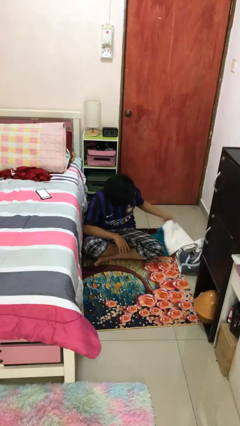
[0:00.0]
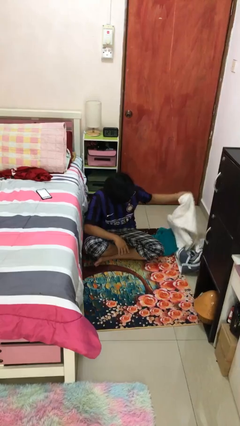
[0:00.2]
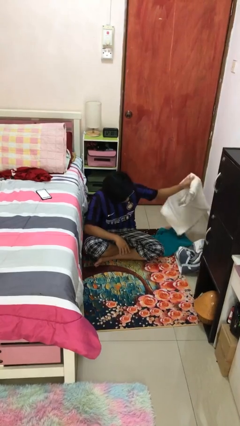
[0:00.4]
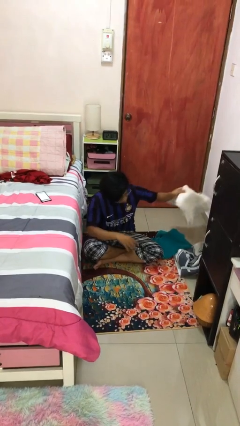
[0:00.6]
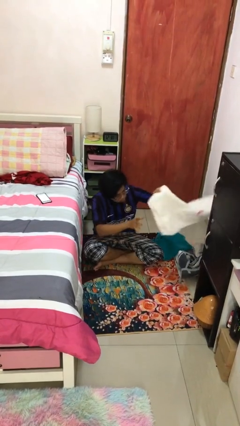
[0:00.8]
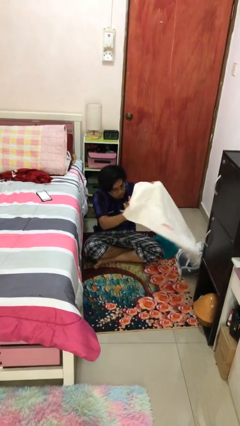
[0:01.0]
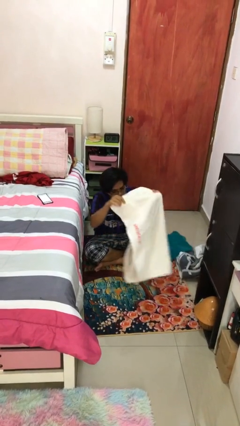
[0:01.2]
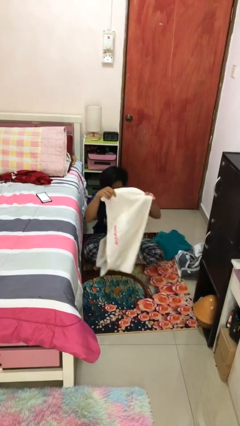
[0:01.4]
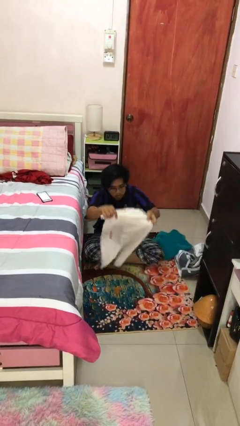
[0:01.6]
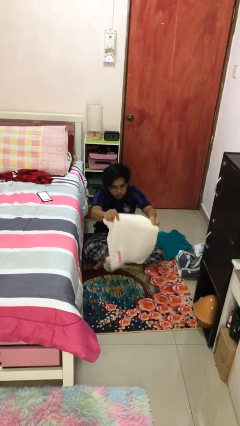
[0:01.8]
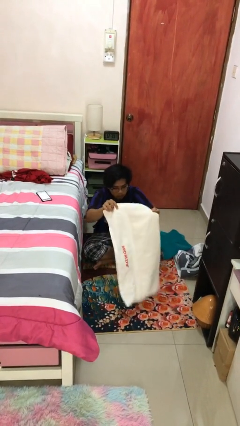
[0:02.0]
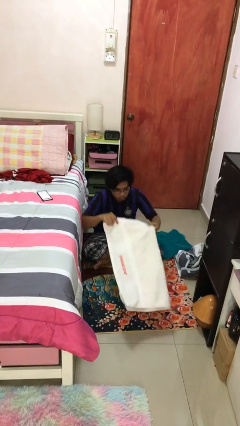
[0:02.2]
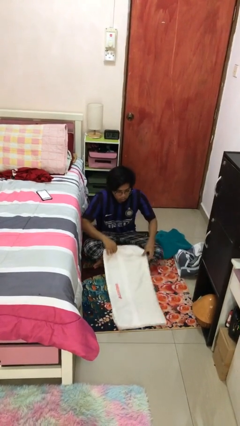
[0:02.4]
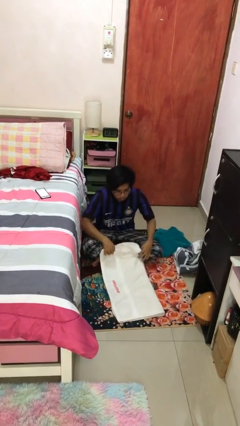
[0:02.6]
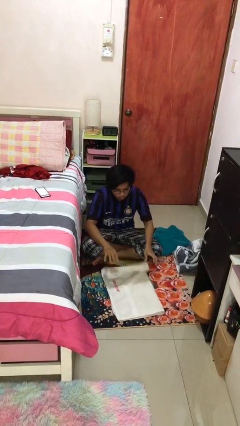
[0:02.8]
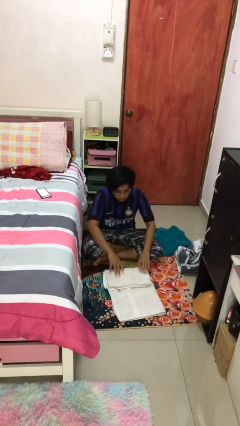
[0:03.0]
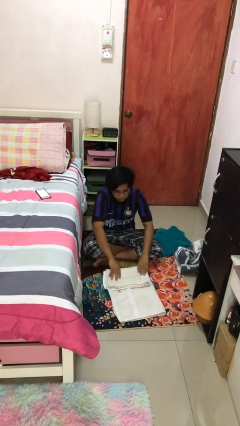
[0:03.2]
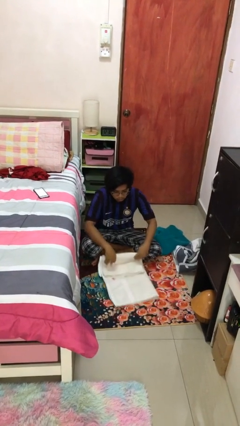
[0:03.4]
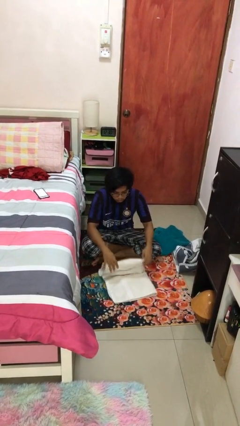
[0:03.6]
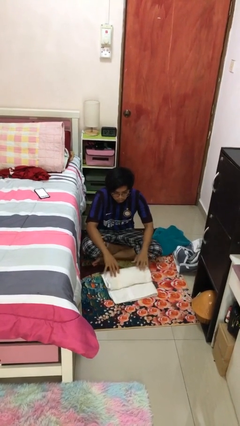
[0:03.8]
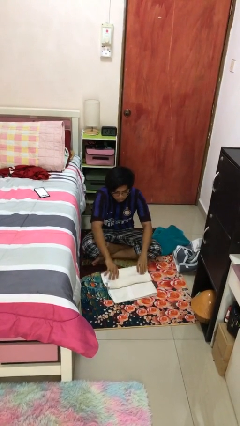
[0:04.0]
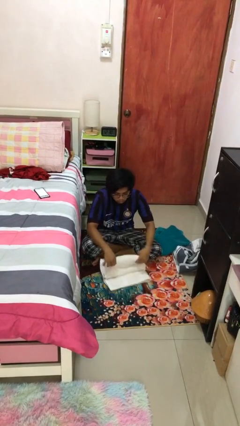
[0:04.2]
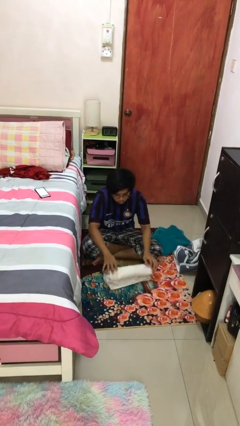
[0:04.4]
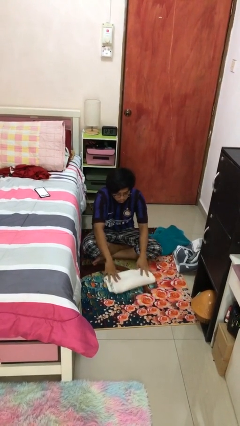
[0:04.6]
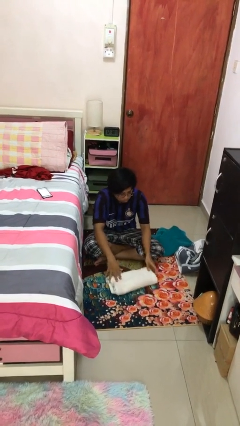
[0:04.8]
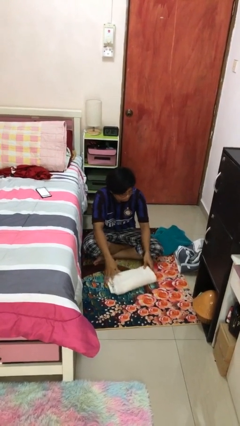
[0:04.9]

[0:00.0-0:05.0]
person folds towel

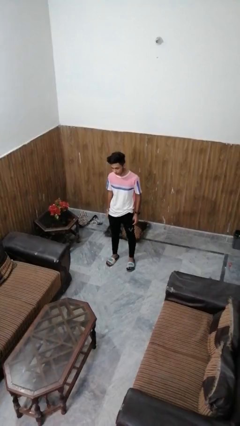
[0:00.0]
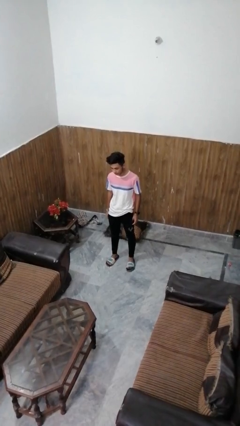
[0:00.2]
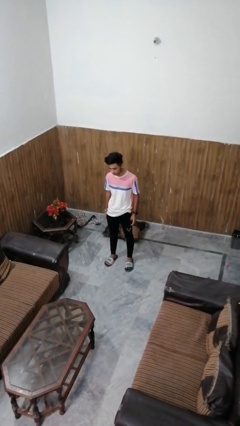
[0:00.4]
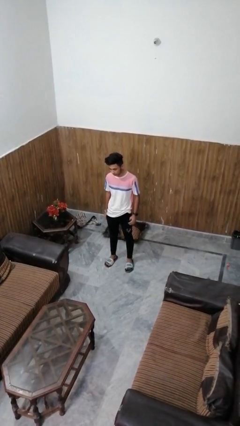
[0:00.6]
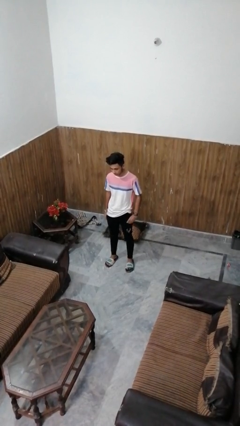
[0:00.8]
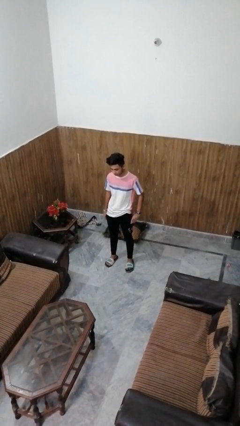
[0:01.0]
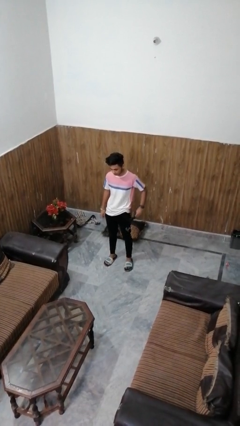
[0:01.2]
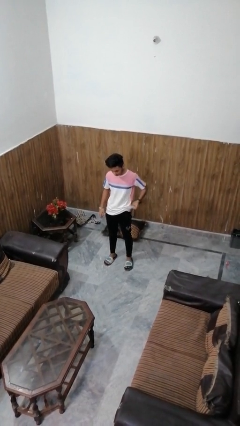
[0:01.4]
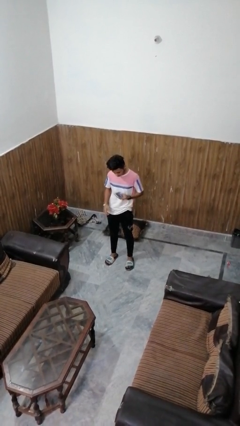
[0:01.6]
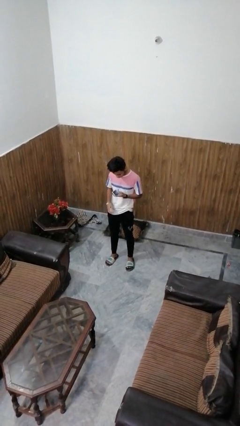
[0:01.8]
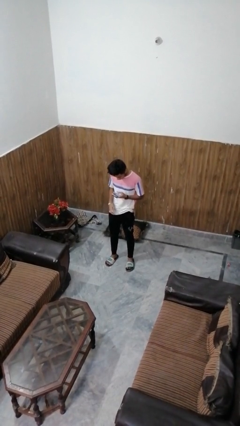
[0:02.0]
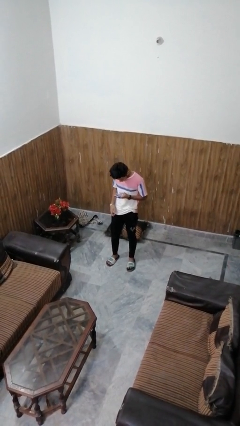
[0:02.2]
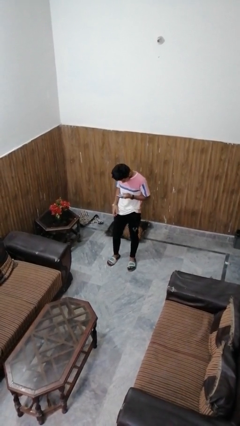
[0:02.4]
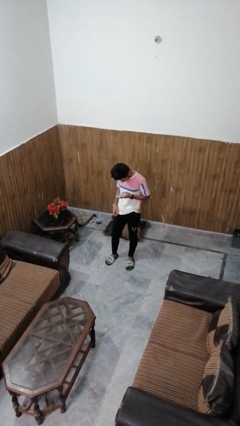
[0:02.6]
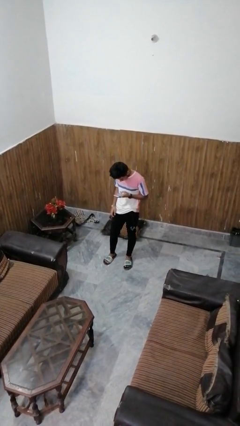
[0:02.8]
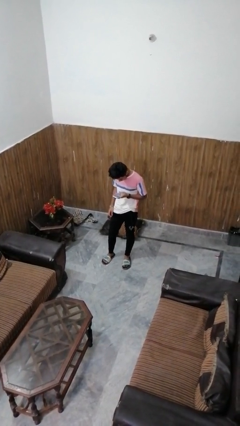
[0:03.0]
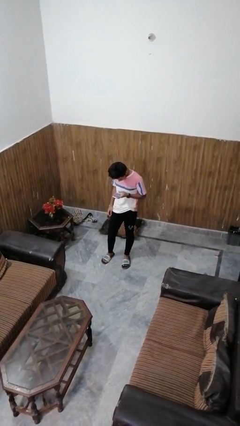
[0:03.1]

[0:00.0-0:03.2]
person takes phone from pocket

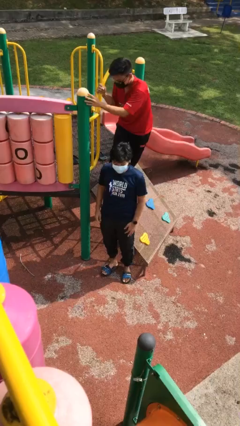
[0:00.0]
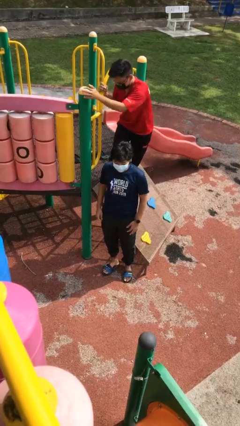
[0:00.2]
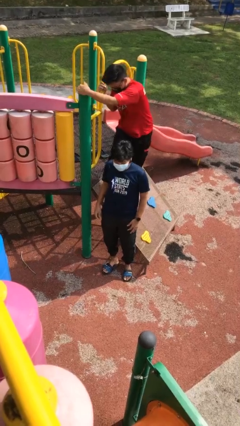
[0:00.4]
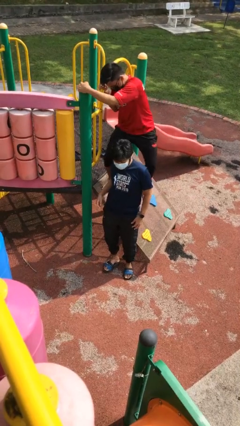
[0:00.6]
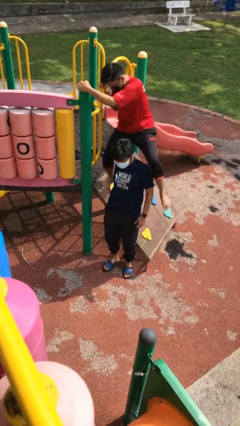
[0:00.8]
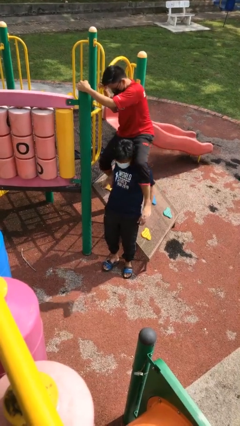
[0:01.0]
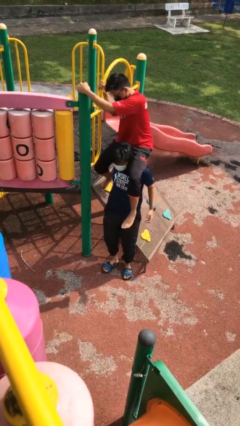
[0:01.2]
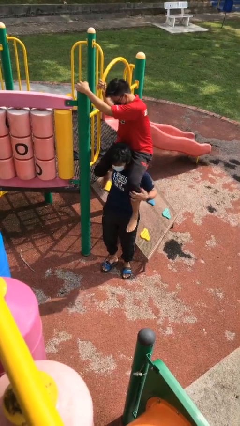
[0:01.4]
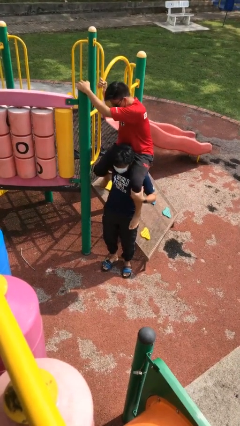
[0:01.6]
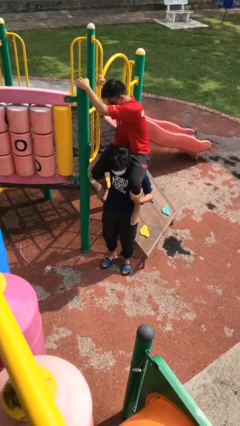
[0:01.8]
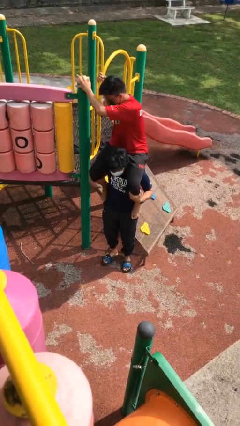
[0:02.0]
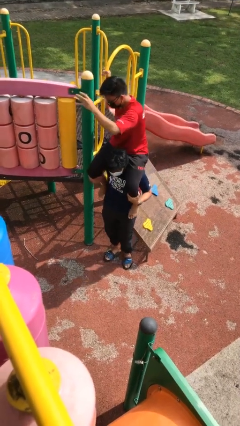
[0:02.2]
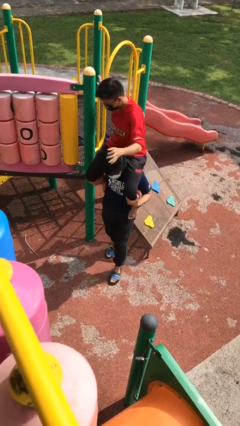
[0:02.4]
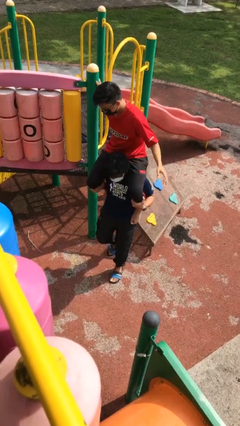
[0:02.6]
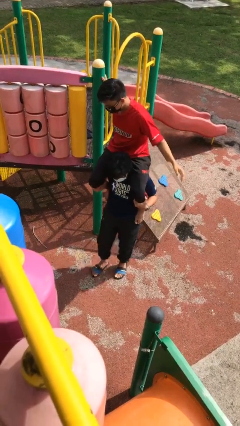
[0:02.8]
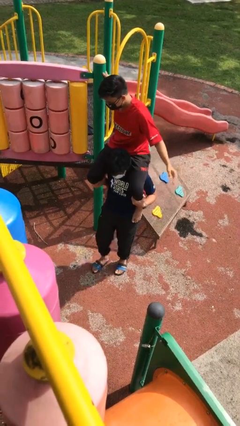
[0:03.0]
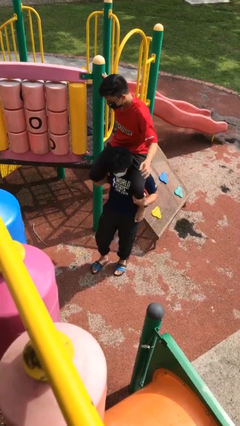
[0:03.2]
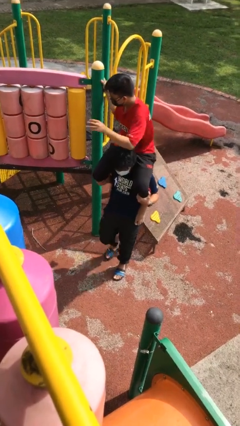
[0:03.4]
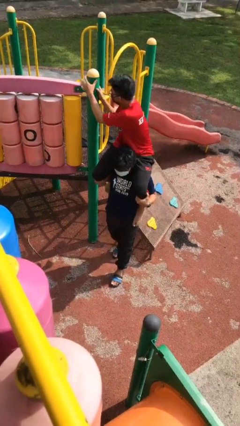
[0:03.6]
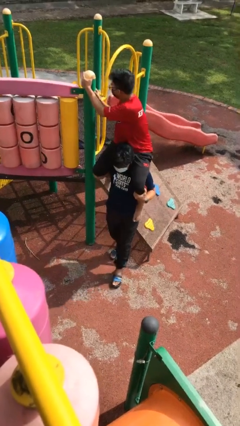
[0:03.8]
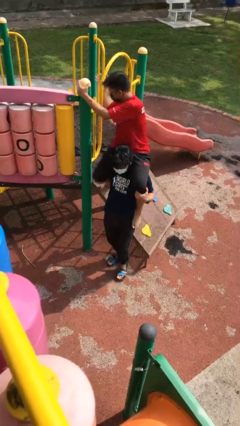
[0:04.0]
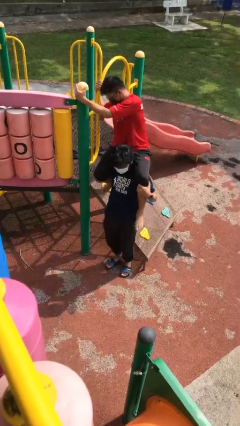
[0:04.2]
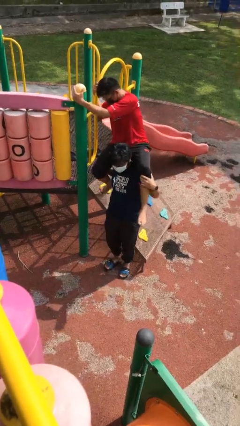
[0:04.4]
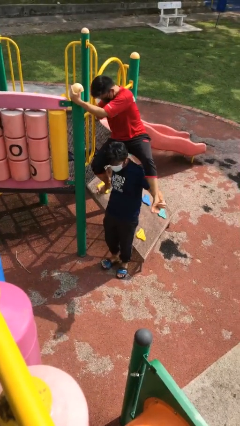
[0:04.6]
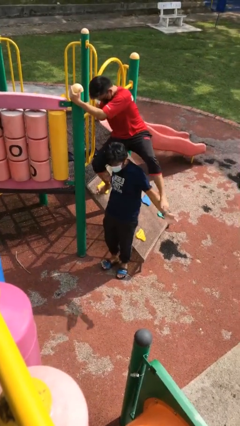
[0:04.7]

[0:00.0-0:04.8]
person carries person on shoulders

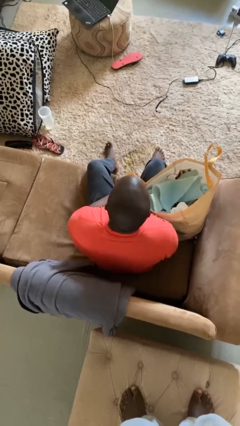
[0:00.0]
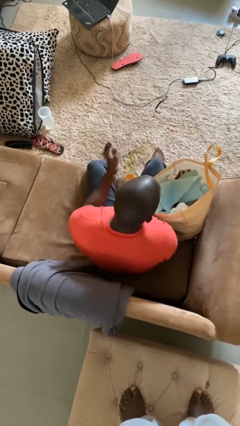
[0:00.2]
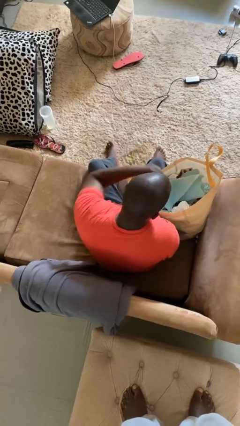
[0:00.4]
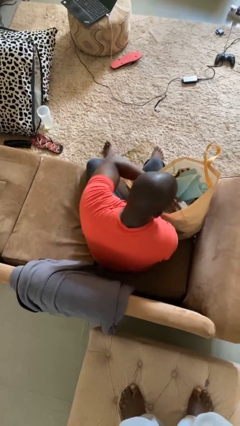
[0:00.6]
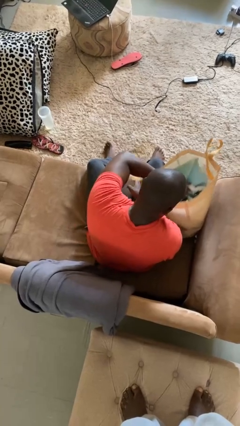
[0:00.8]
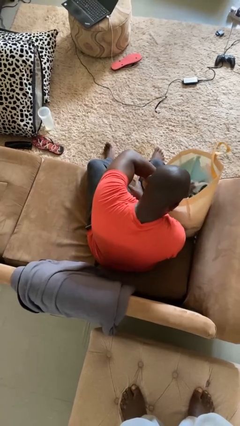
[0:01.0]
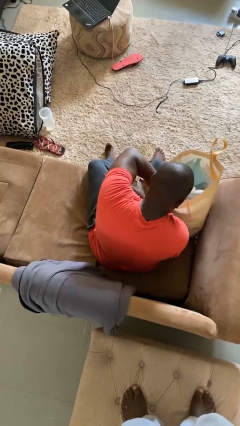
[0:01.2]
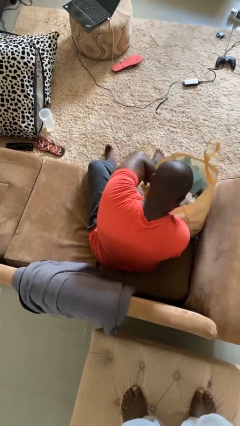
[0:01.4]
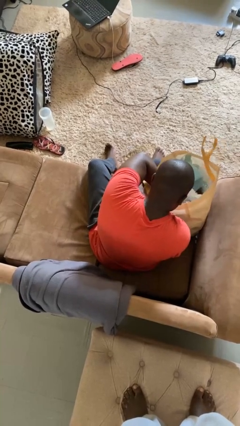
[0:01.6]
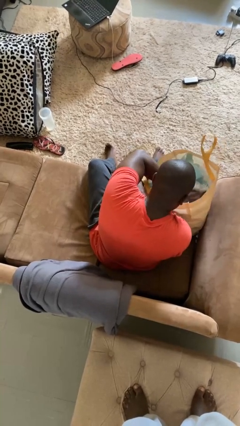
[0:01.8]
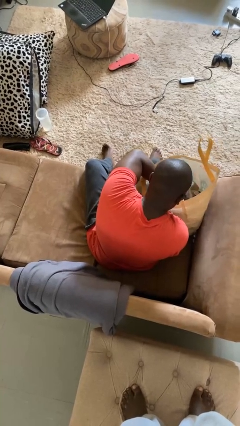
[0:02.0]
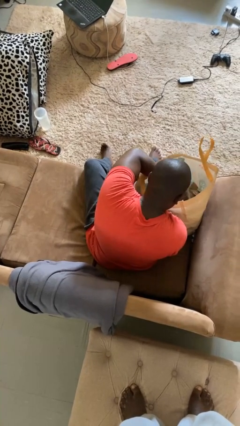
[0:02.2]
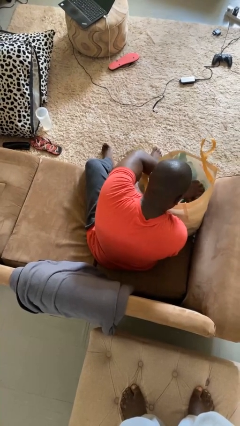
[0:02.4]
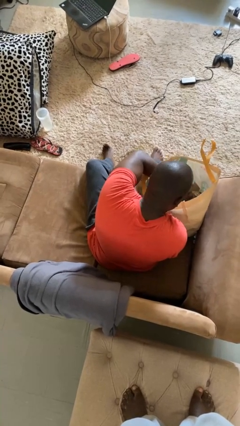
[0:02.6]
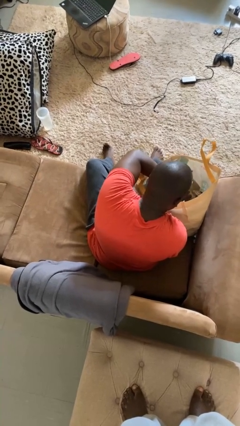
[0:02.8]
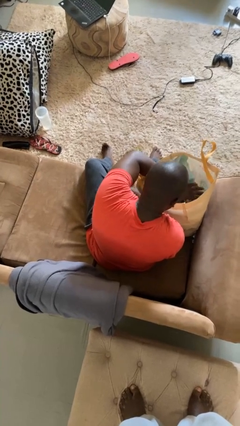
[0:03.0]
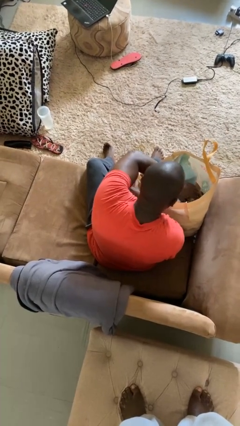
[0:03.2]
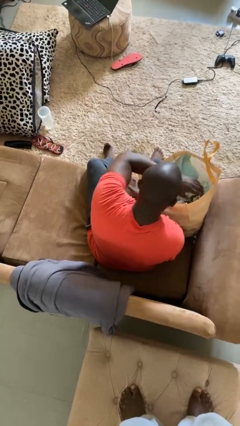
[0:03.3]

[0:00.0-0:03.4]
person searches in bag

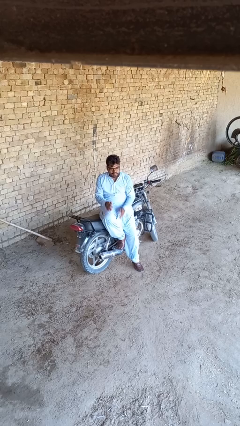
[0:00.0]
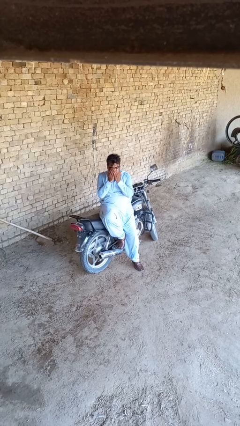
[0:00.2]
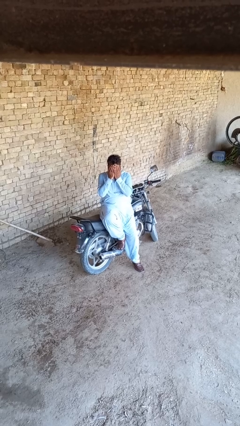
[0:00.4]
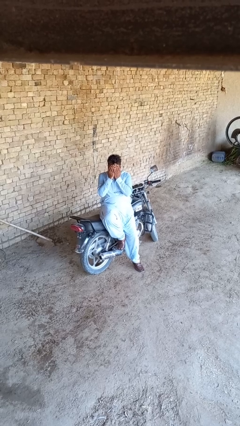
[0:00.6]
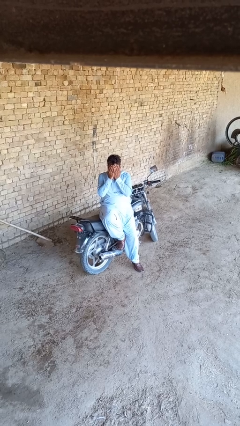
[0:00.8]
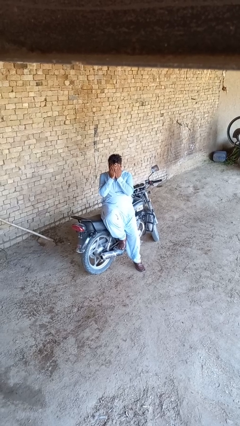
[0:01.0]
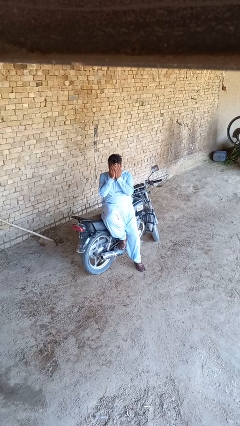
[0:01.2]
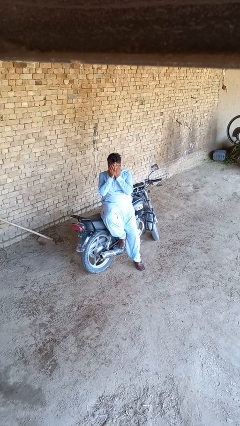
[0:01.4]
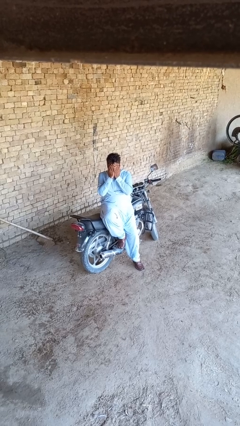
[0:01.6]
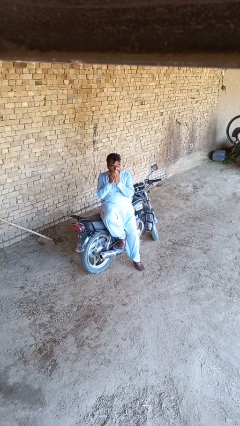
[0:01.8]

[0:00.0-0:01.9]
person covers face with hands
